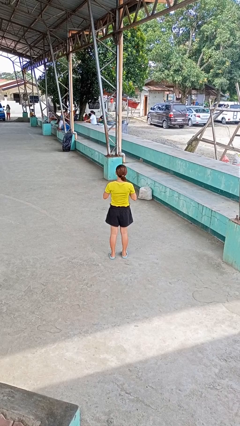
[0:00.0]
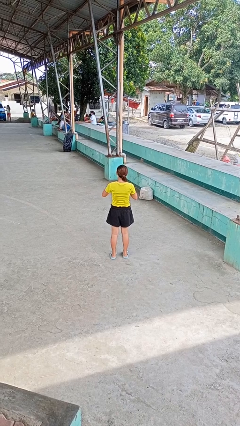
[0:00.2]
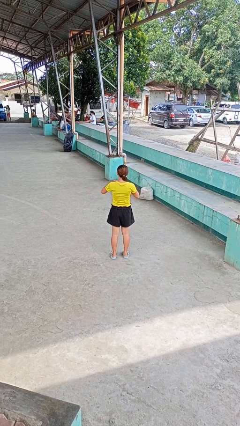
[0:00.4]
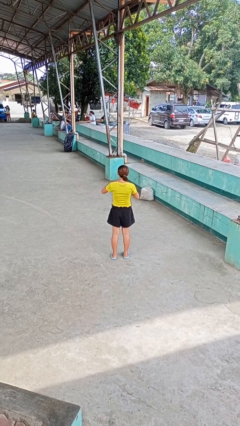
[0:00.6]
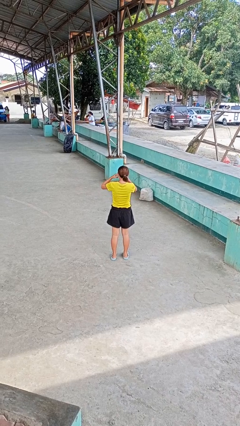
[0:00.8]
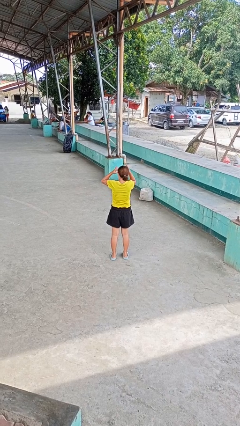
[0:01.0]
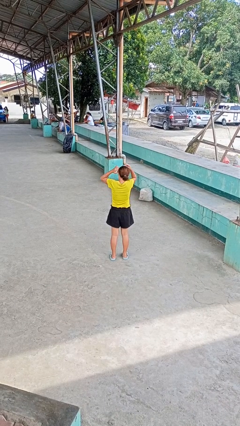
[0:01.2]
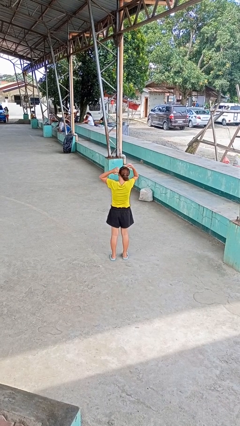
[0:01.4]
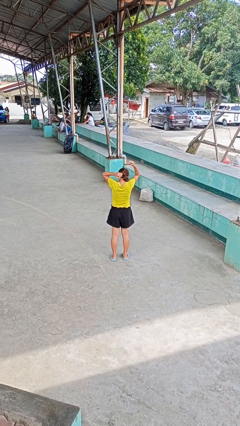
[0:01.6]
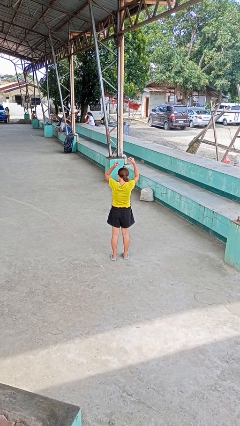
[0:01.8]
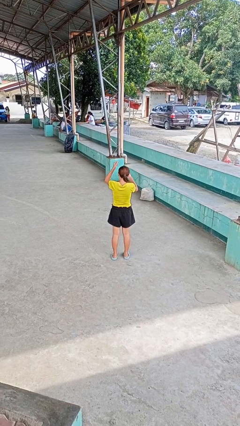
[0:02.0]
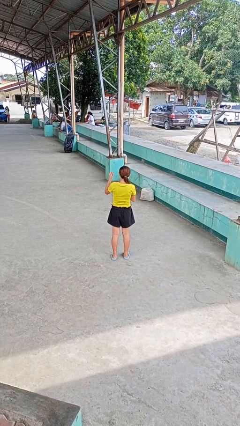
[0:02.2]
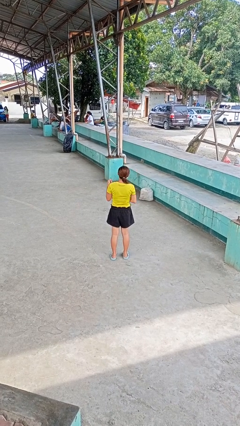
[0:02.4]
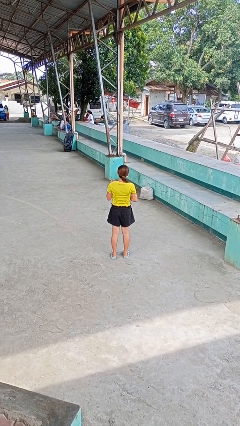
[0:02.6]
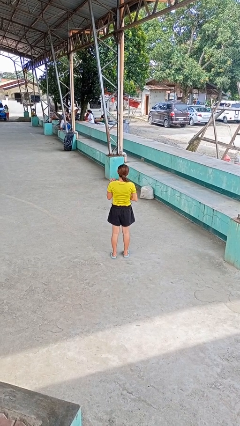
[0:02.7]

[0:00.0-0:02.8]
person takes off necklace

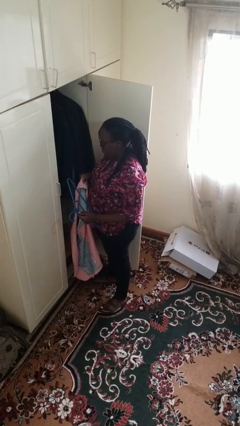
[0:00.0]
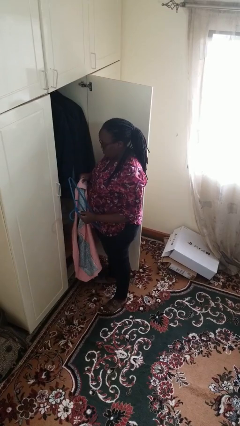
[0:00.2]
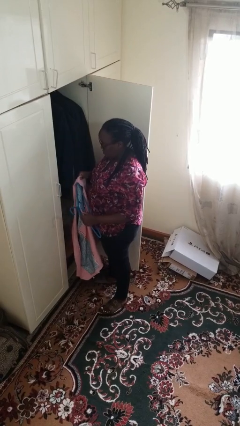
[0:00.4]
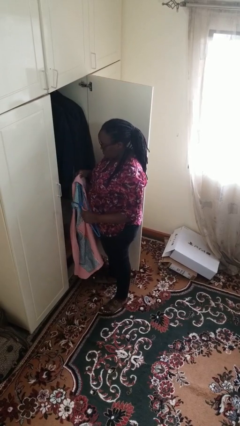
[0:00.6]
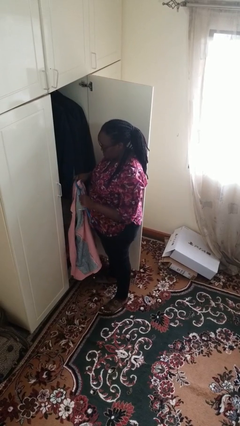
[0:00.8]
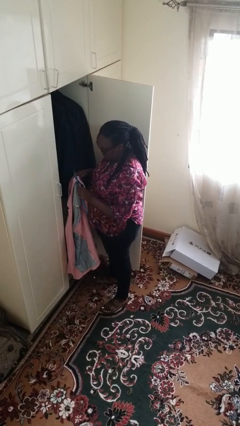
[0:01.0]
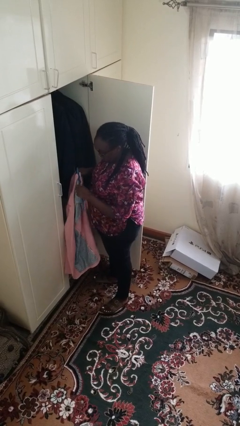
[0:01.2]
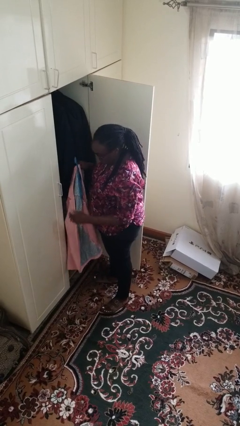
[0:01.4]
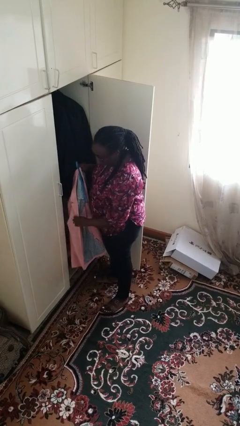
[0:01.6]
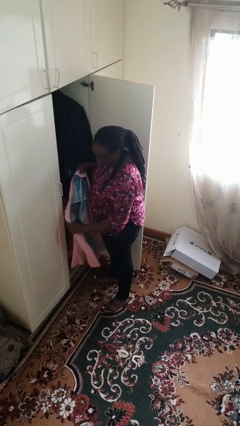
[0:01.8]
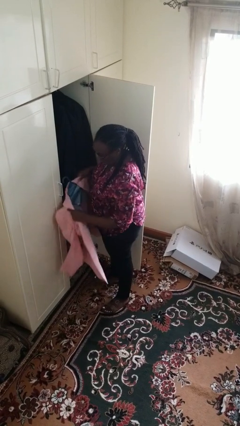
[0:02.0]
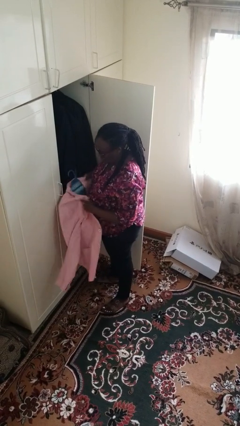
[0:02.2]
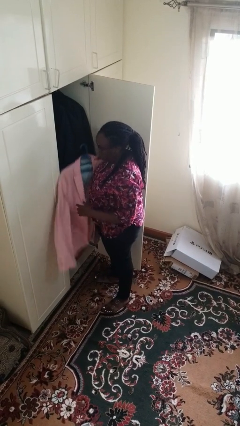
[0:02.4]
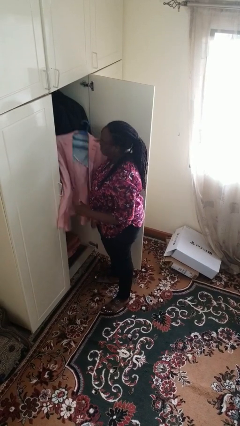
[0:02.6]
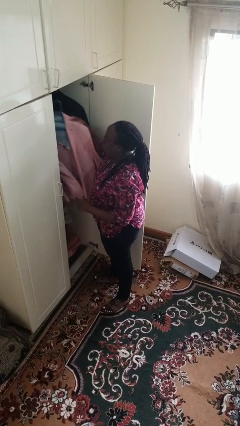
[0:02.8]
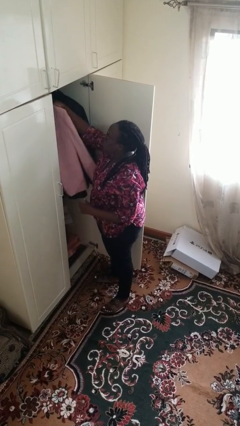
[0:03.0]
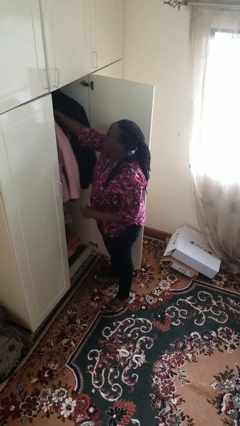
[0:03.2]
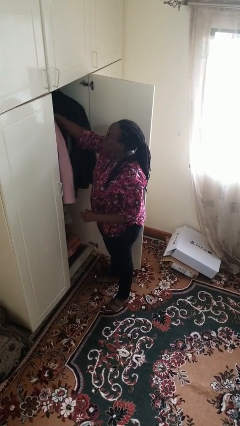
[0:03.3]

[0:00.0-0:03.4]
person puts clothes into closet

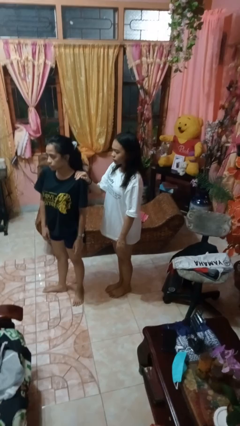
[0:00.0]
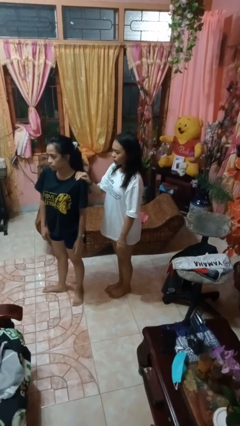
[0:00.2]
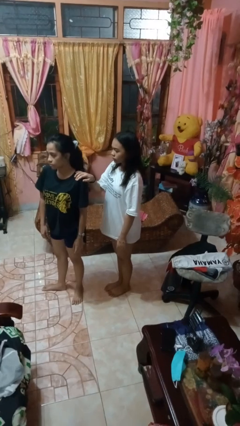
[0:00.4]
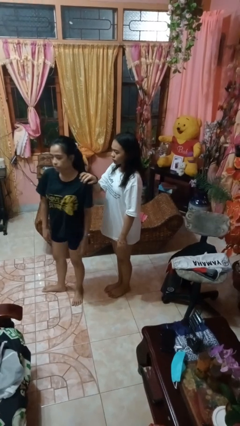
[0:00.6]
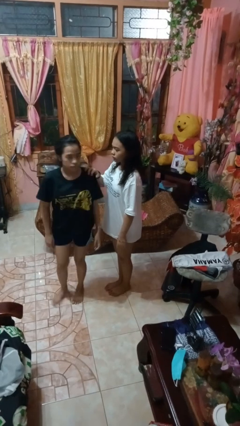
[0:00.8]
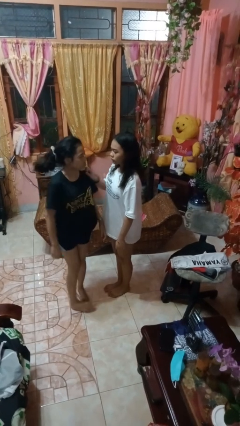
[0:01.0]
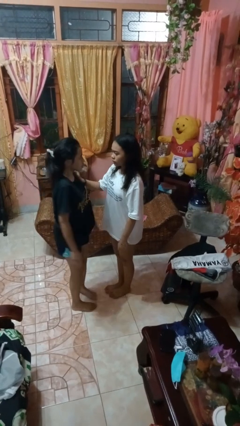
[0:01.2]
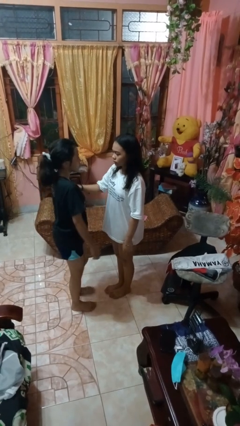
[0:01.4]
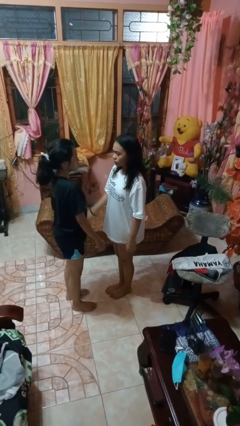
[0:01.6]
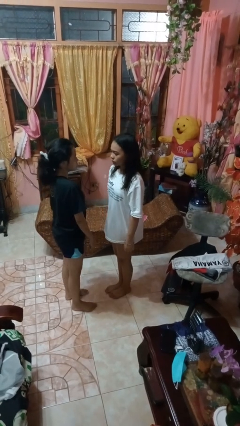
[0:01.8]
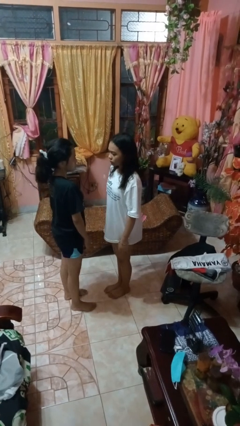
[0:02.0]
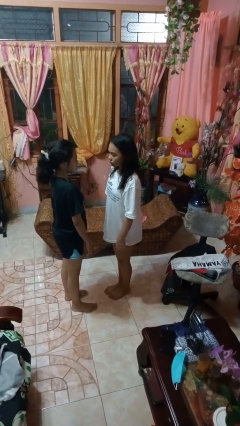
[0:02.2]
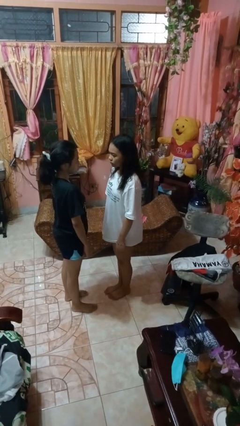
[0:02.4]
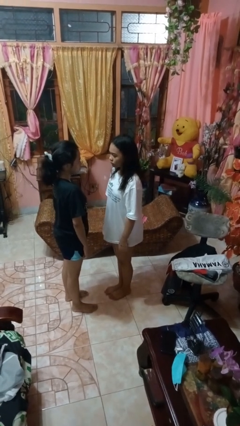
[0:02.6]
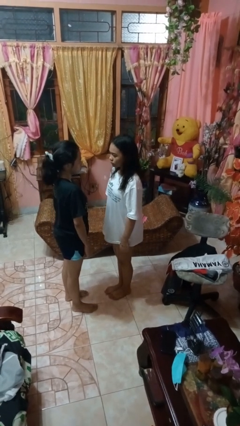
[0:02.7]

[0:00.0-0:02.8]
person spins person around

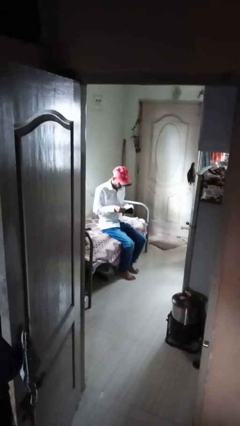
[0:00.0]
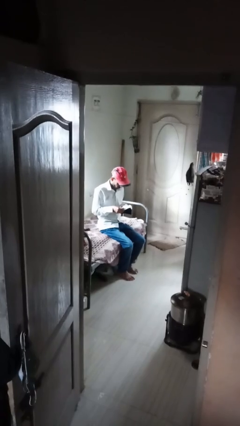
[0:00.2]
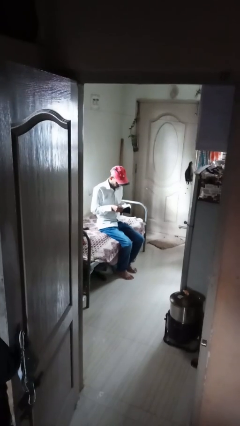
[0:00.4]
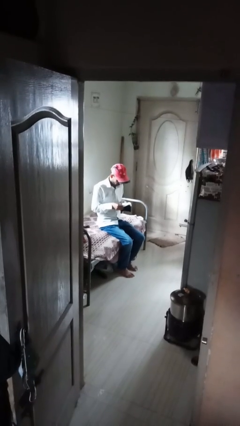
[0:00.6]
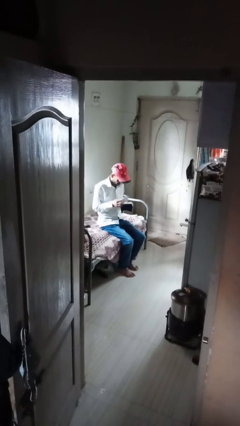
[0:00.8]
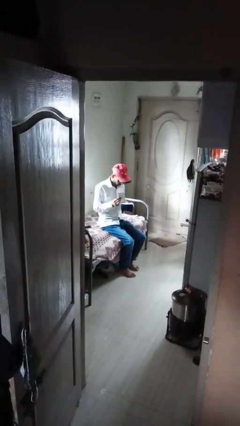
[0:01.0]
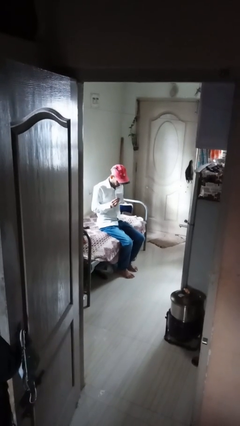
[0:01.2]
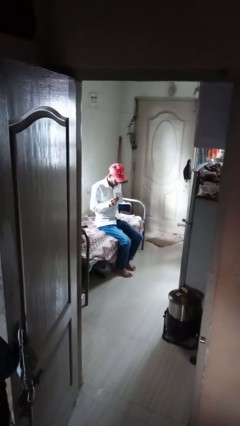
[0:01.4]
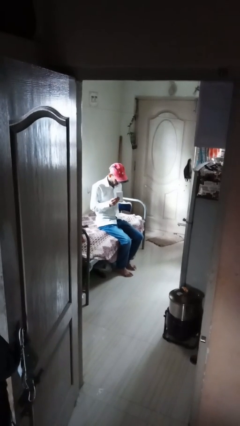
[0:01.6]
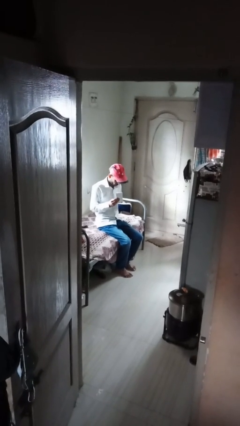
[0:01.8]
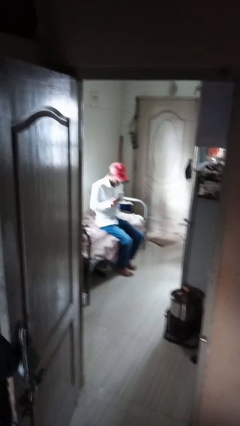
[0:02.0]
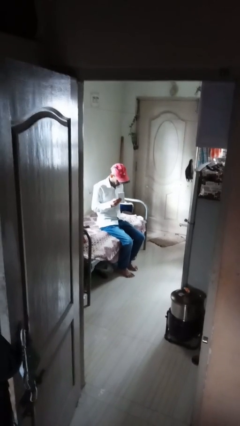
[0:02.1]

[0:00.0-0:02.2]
person takes object from purse

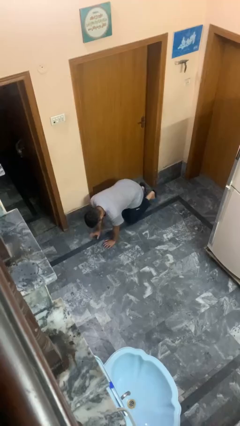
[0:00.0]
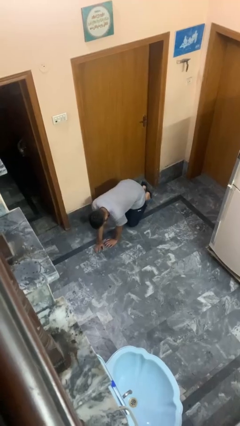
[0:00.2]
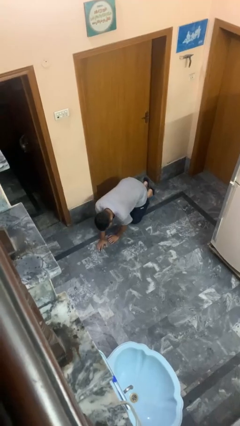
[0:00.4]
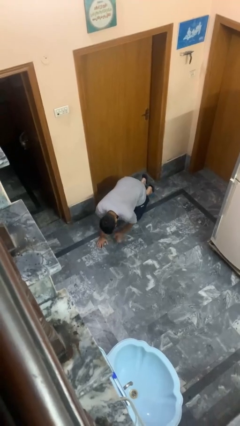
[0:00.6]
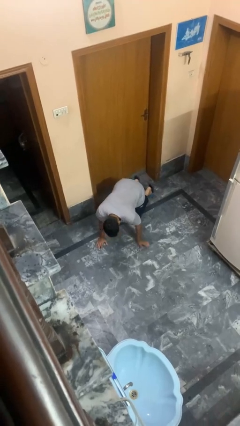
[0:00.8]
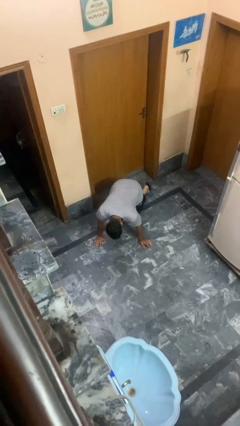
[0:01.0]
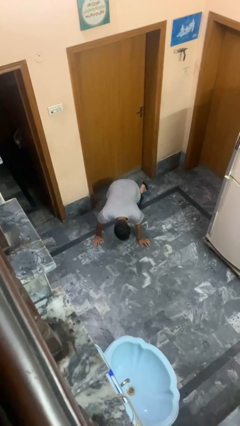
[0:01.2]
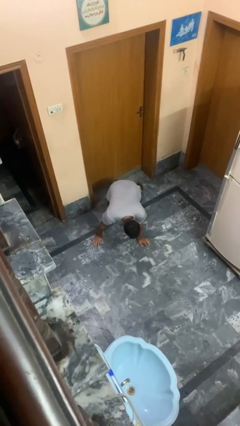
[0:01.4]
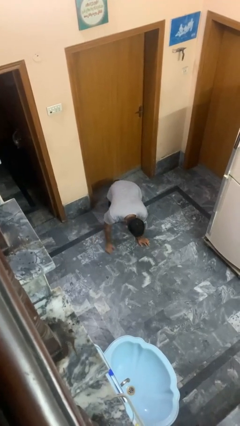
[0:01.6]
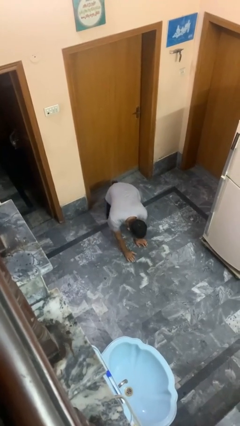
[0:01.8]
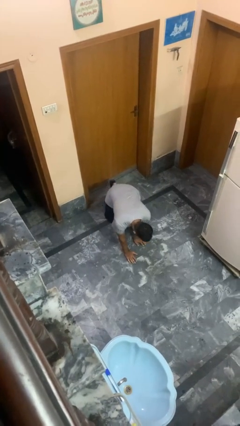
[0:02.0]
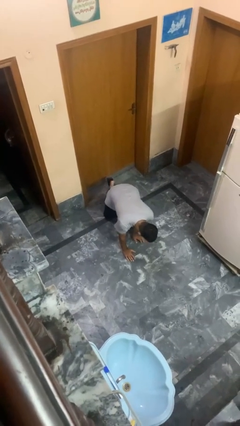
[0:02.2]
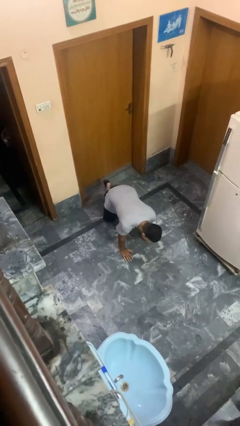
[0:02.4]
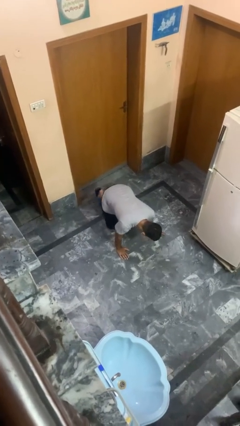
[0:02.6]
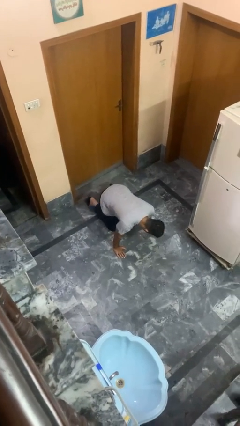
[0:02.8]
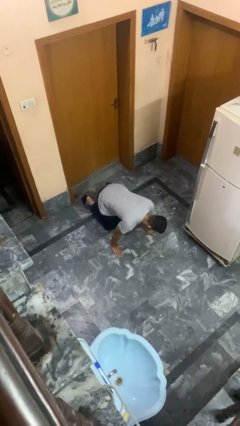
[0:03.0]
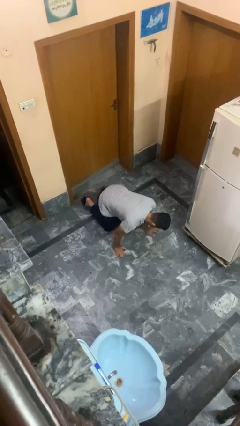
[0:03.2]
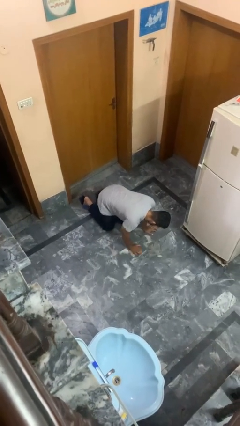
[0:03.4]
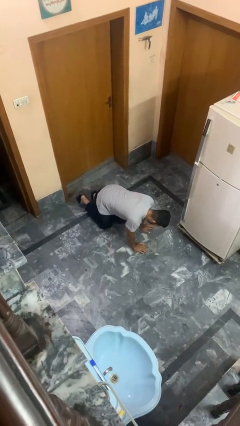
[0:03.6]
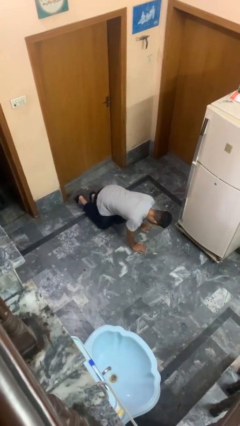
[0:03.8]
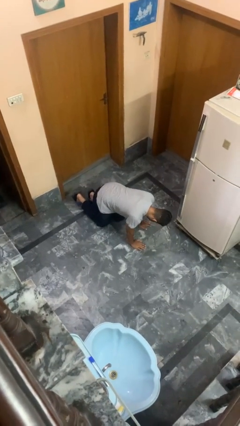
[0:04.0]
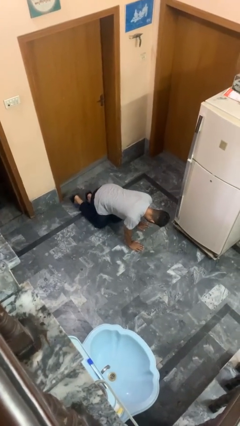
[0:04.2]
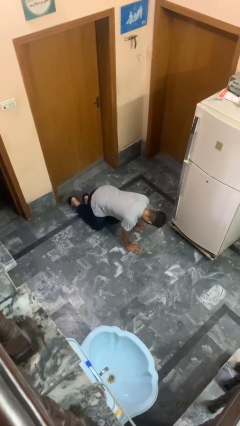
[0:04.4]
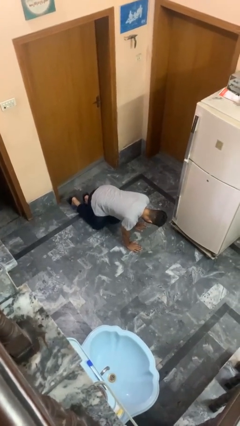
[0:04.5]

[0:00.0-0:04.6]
person crawls

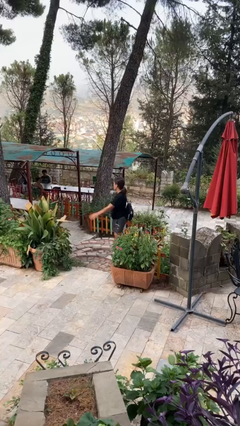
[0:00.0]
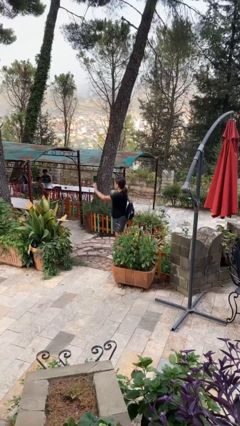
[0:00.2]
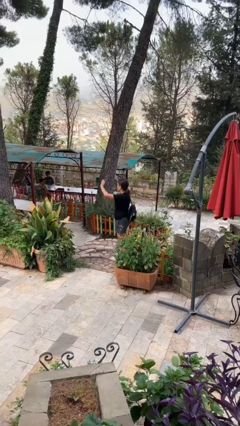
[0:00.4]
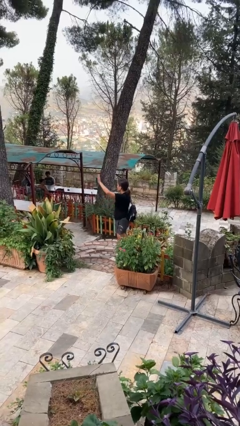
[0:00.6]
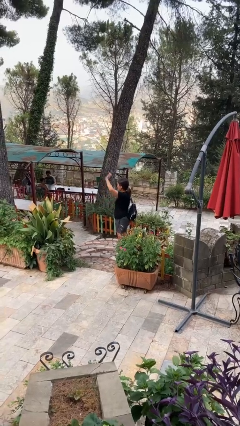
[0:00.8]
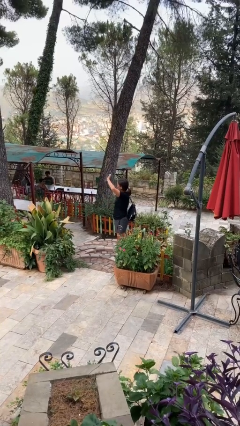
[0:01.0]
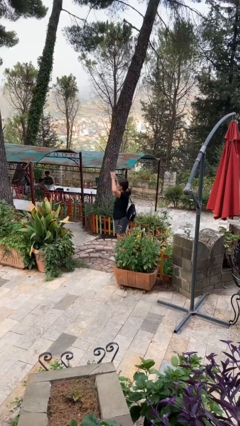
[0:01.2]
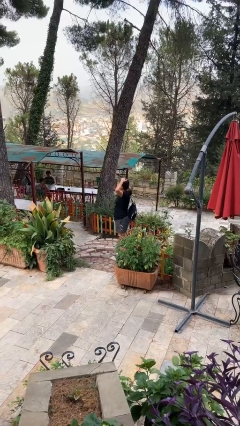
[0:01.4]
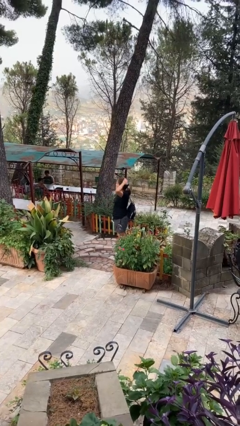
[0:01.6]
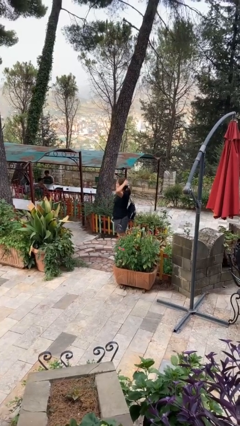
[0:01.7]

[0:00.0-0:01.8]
person waves at person
